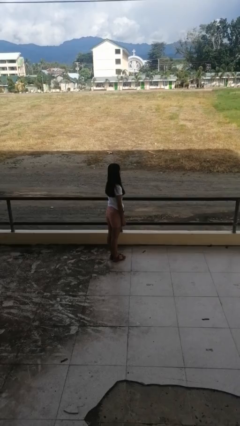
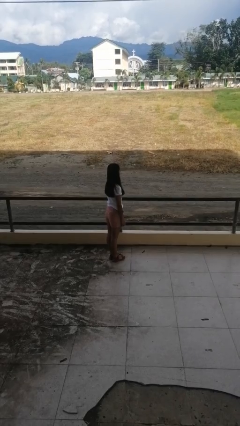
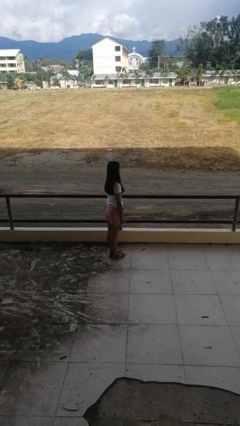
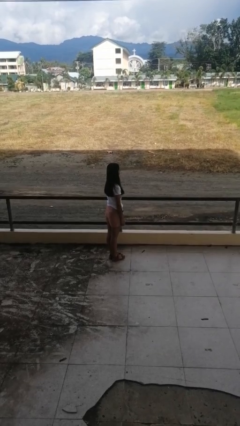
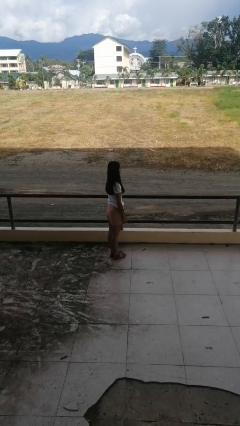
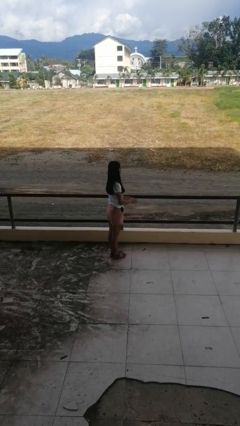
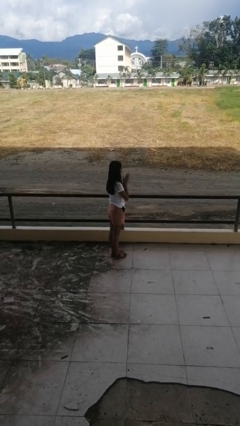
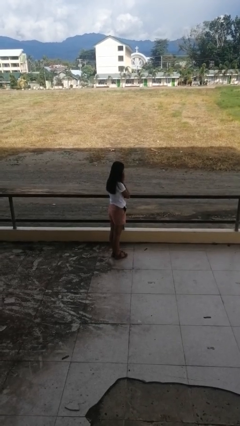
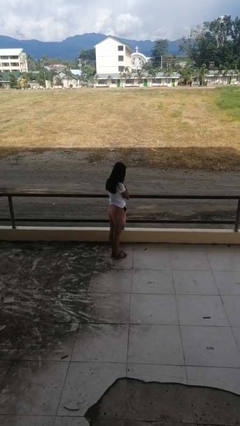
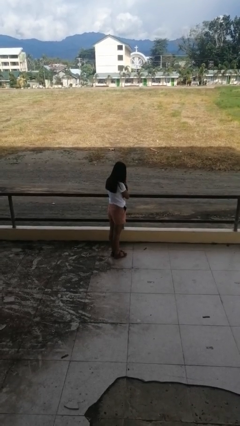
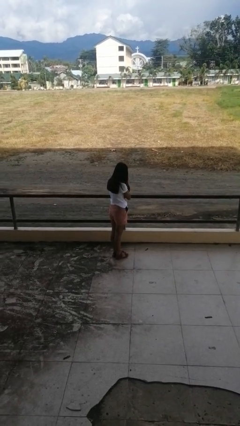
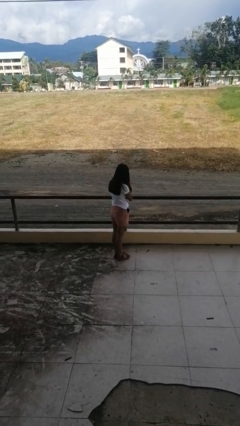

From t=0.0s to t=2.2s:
person sneezes into hand

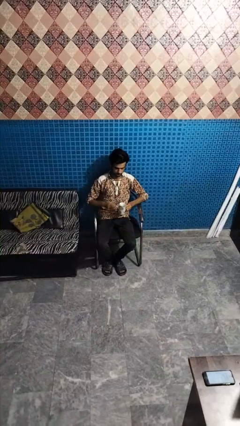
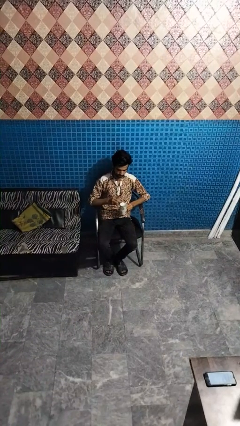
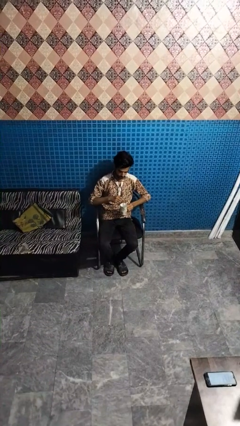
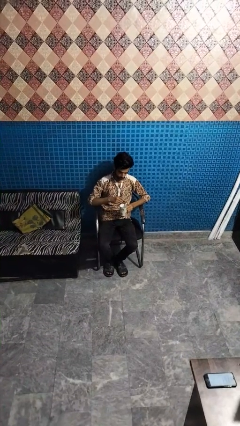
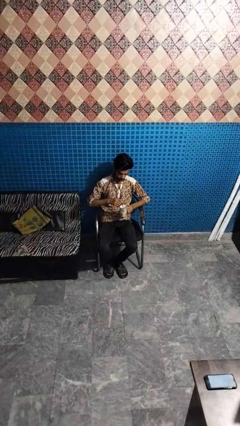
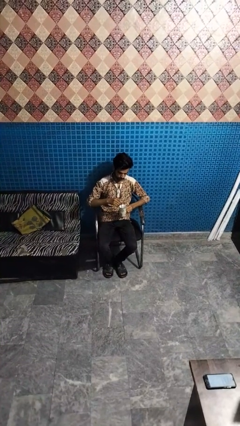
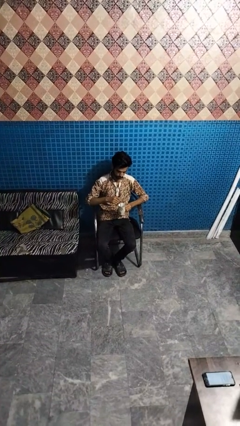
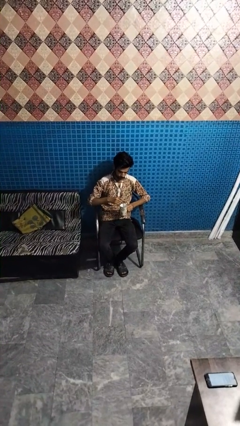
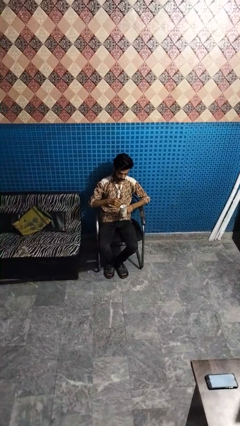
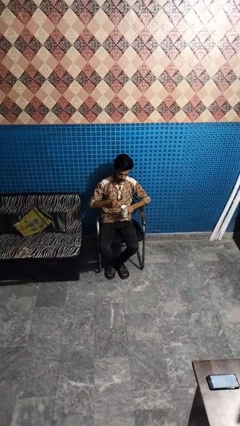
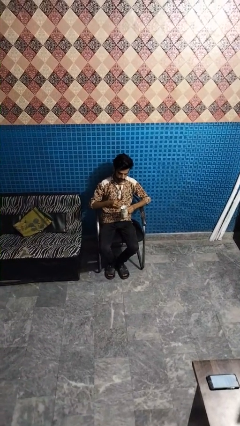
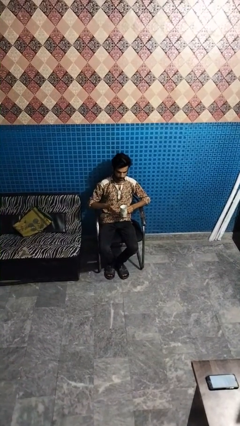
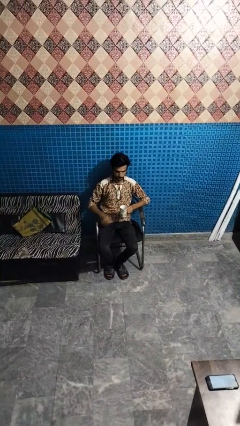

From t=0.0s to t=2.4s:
person stirs mug

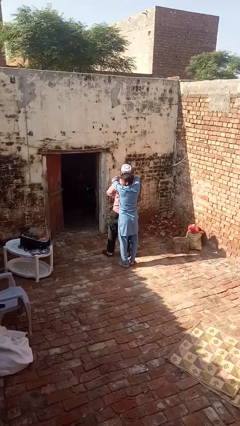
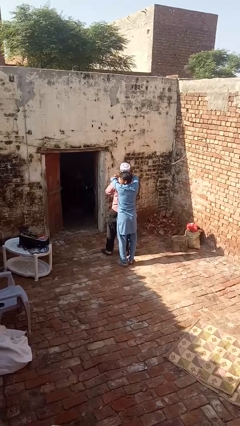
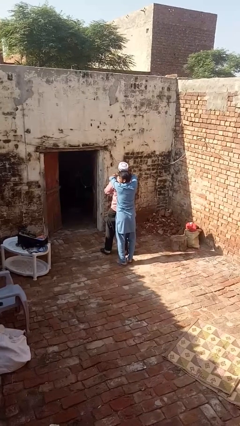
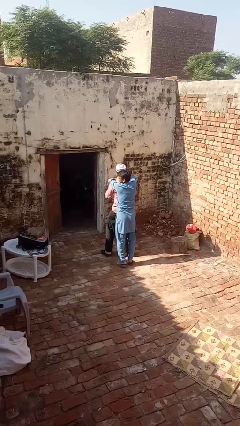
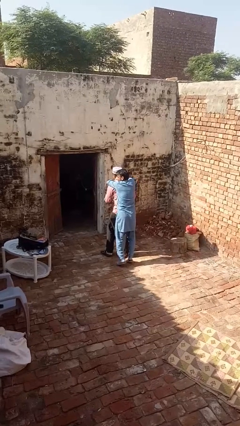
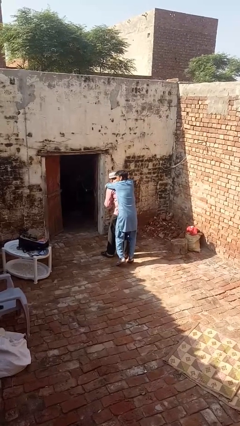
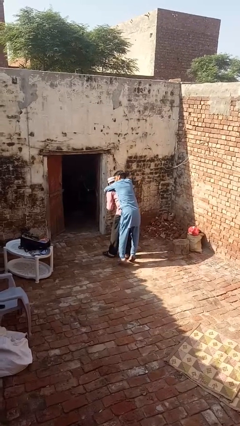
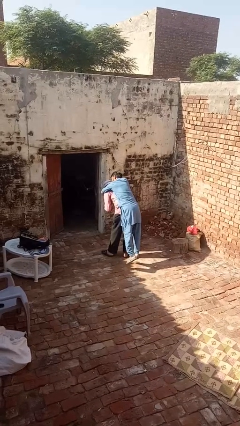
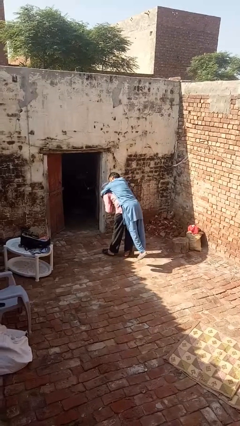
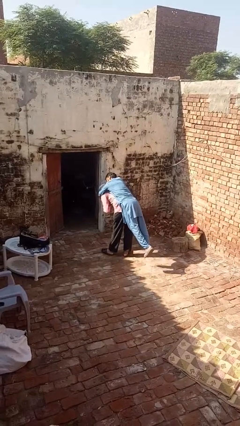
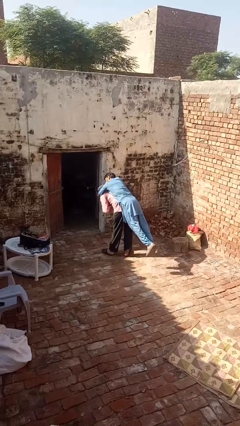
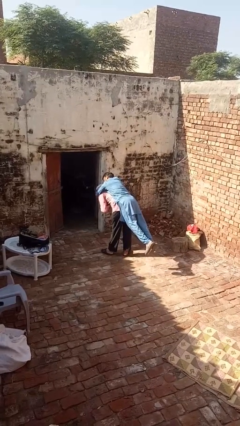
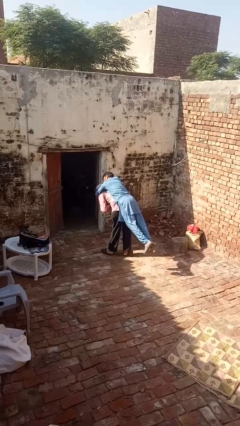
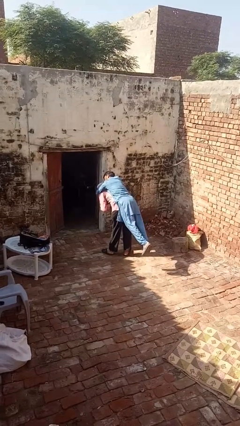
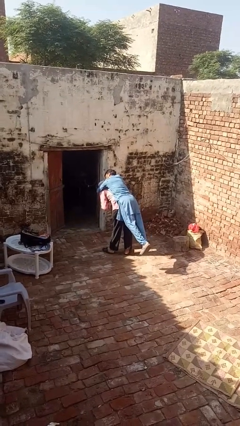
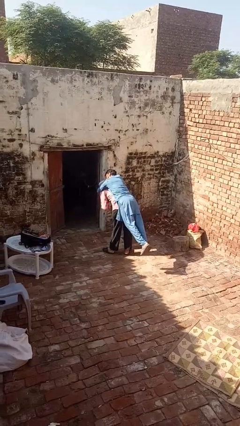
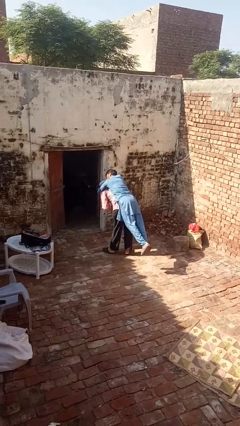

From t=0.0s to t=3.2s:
person carries person over shoulder

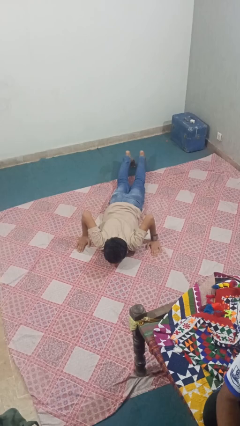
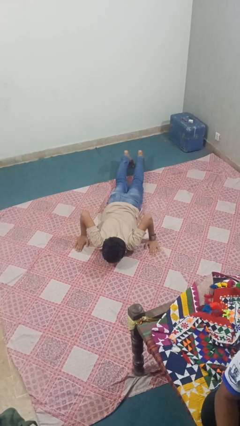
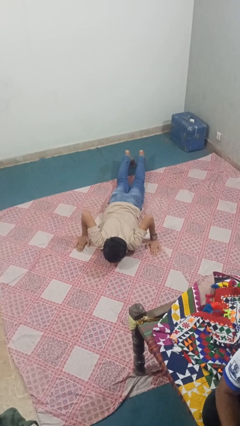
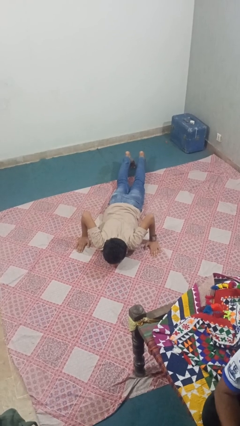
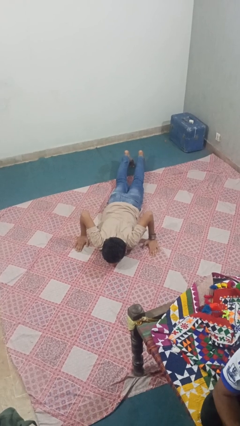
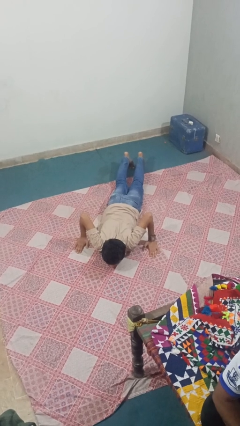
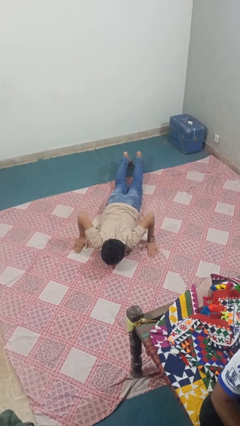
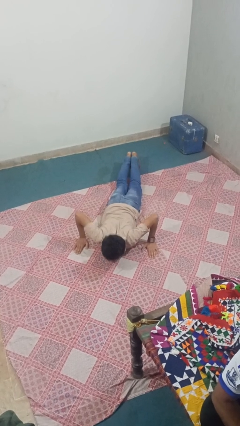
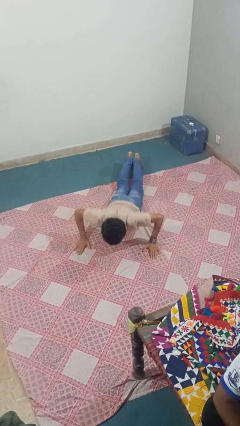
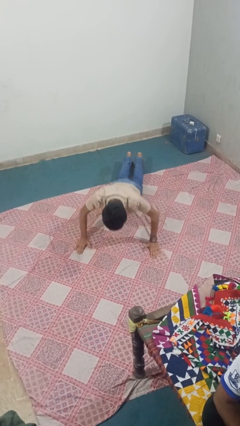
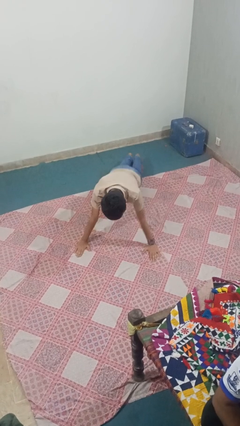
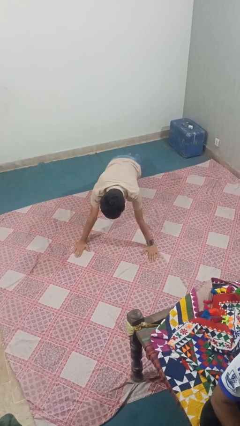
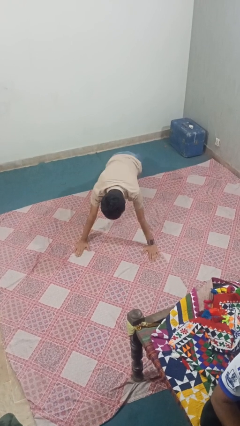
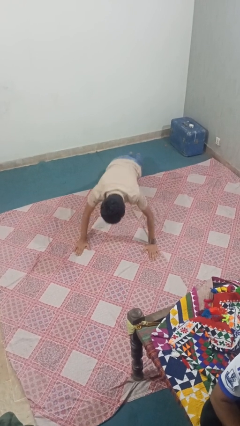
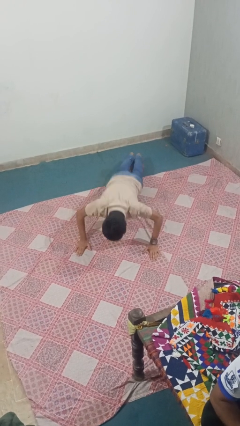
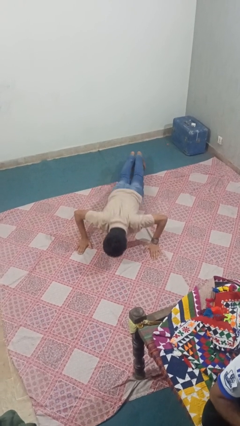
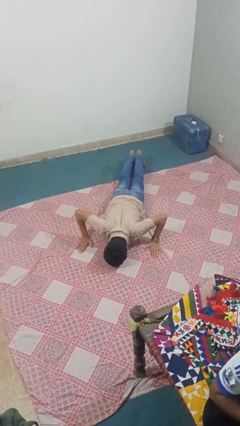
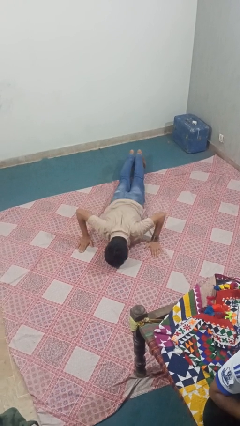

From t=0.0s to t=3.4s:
person exercises with pushup

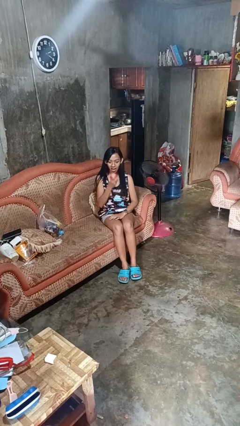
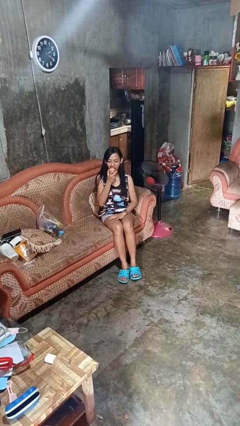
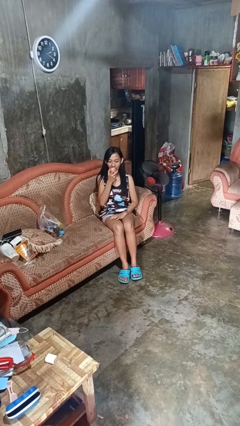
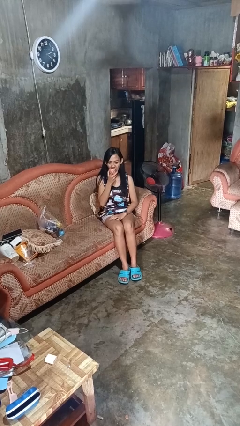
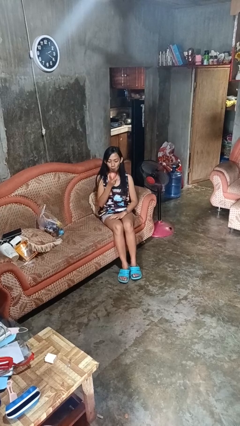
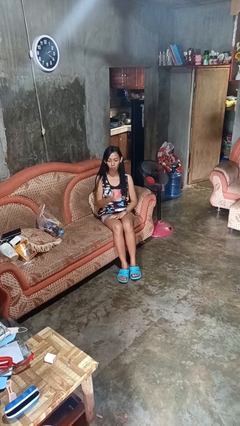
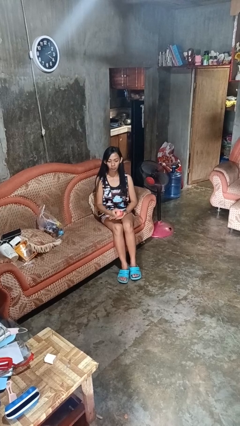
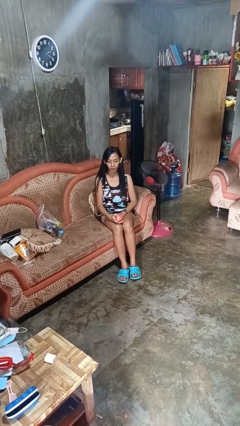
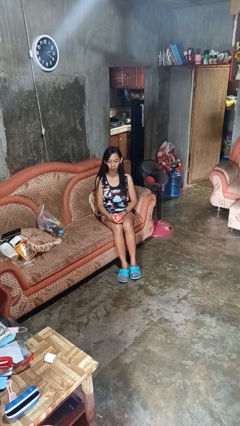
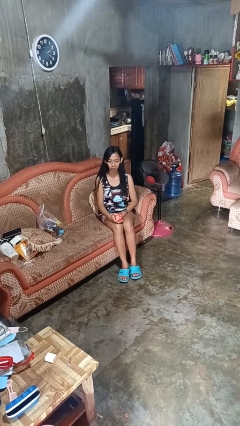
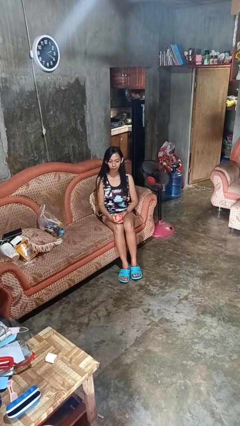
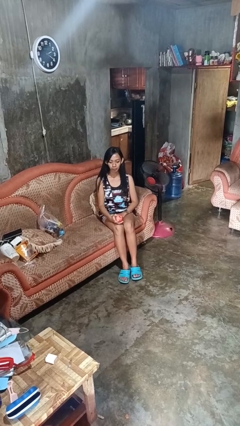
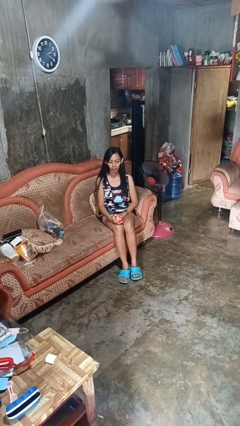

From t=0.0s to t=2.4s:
person eats apple

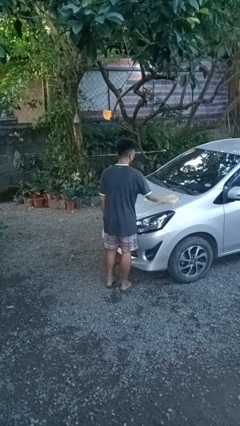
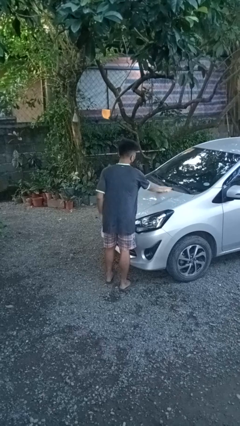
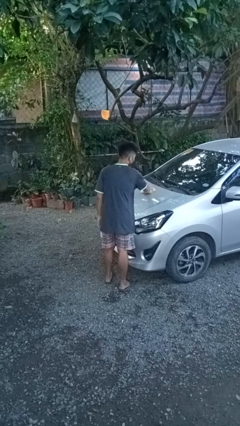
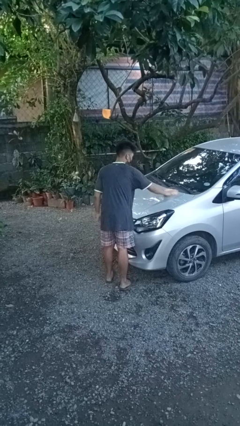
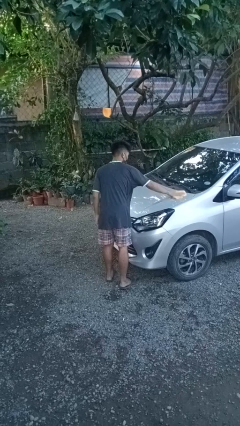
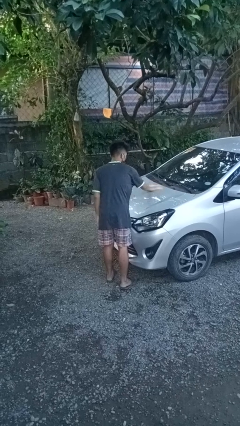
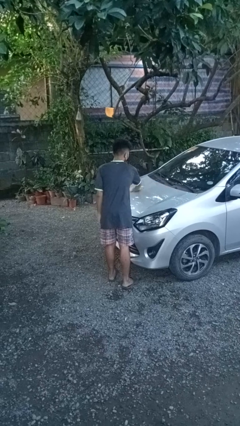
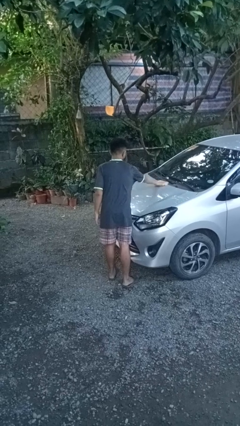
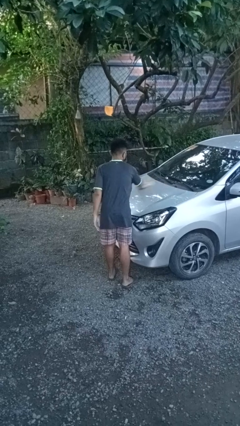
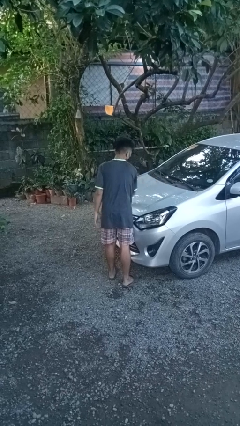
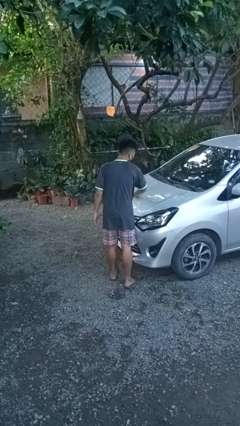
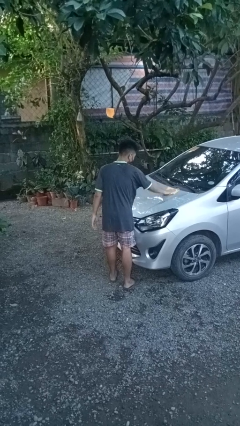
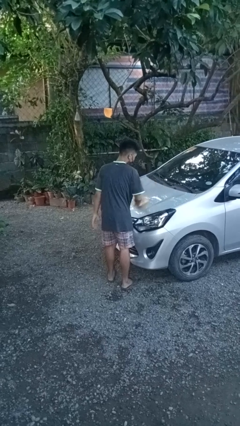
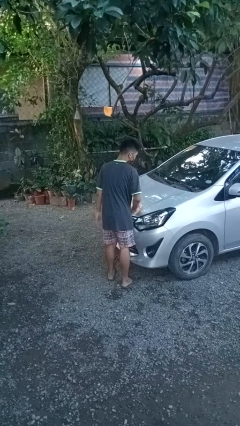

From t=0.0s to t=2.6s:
person polishes car with rag

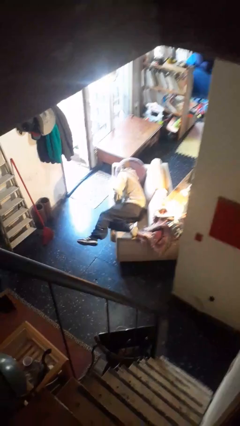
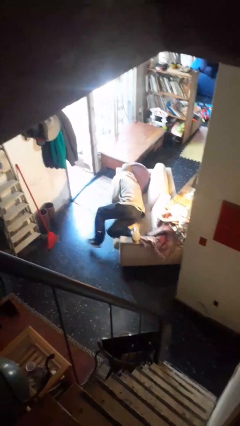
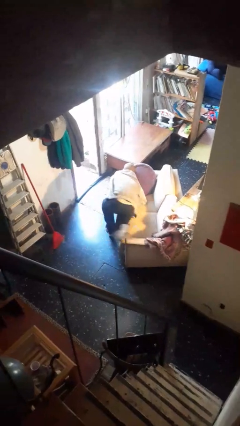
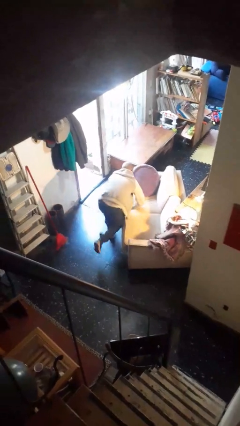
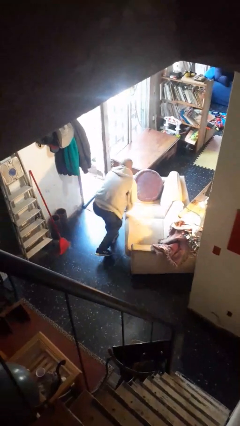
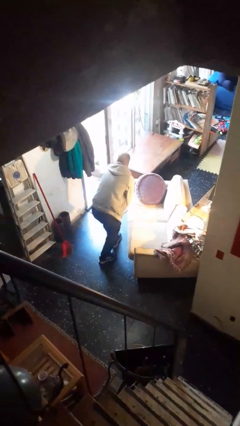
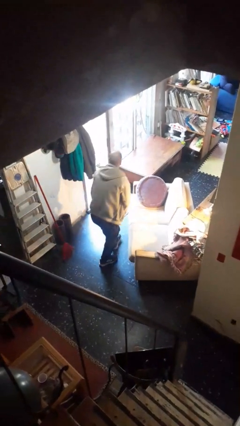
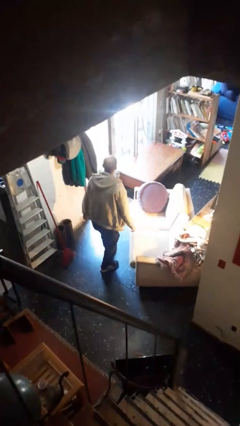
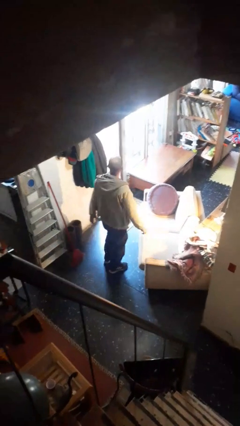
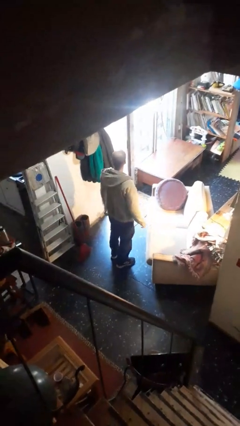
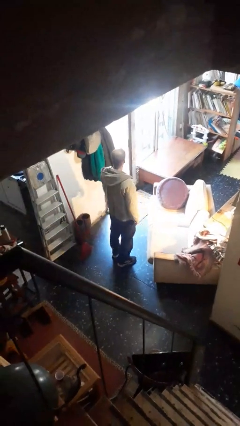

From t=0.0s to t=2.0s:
person stands up
